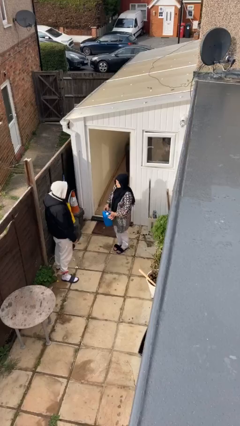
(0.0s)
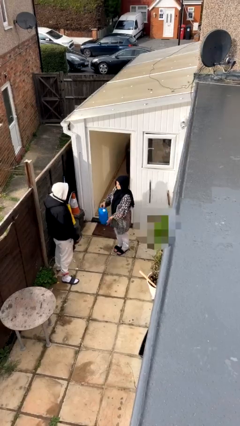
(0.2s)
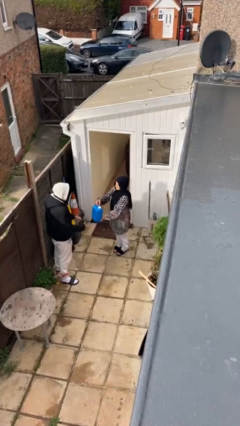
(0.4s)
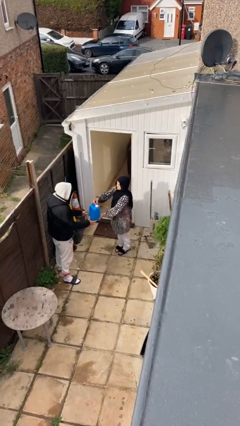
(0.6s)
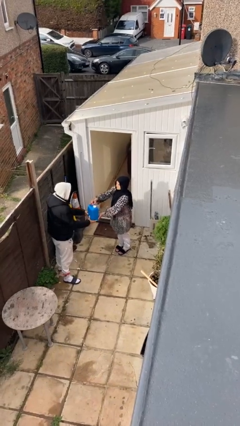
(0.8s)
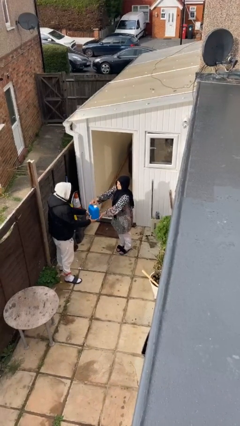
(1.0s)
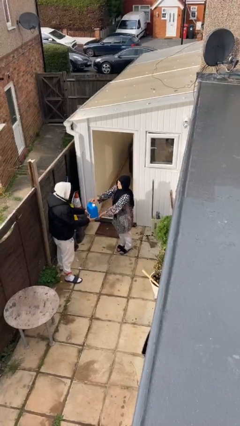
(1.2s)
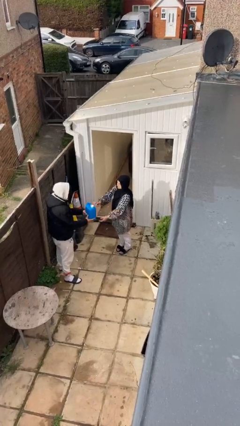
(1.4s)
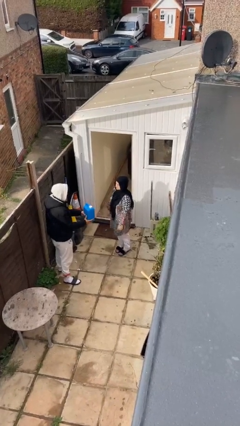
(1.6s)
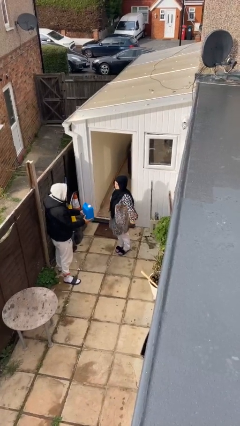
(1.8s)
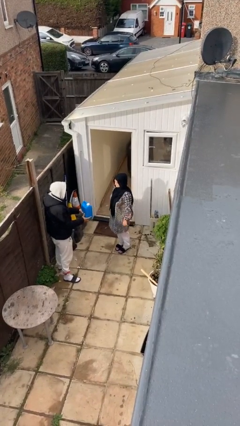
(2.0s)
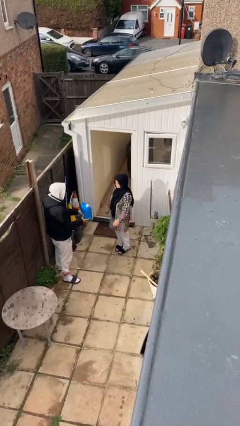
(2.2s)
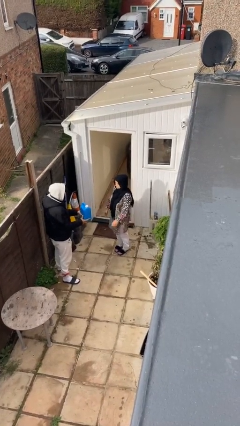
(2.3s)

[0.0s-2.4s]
person transfers object to person

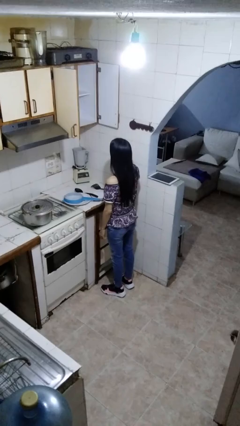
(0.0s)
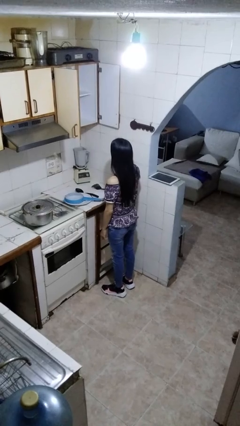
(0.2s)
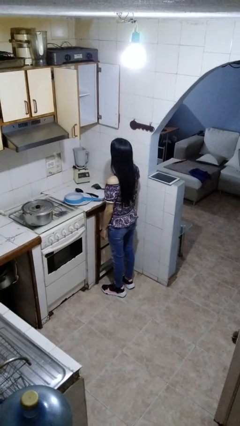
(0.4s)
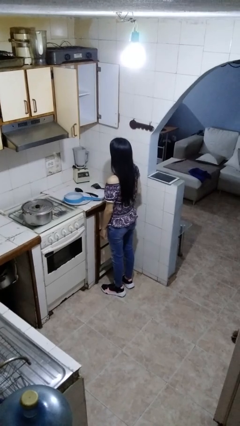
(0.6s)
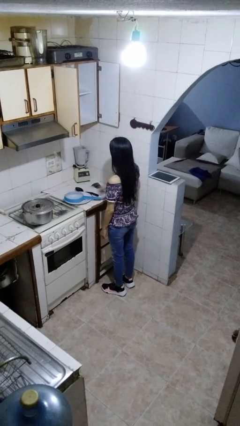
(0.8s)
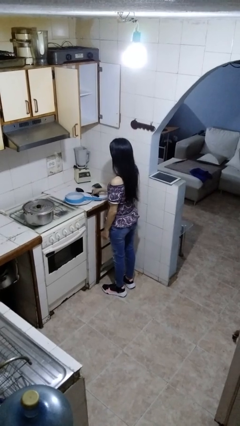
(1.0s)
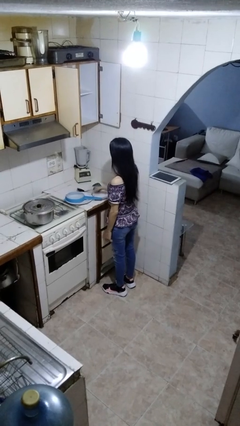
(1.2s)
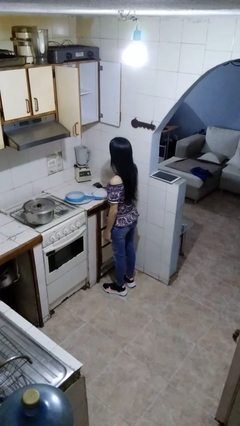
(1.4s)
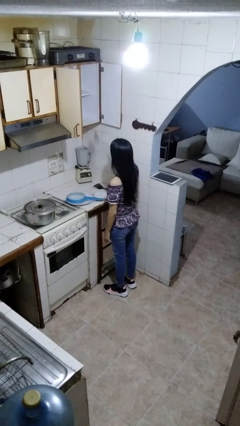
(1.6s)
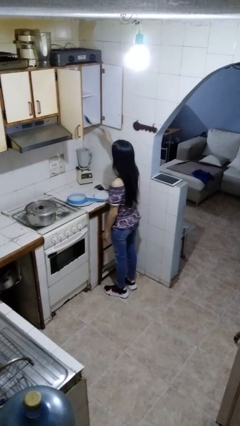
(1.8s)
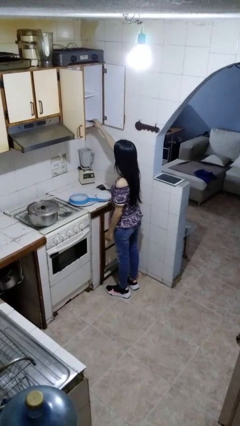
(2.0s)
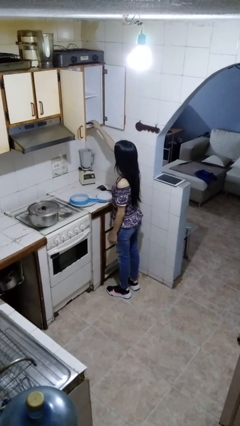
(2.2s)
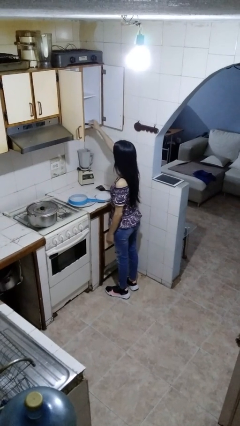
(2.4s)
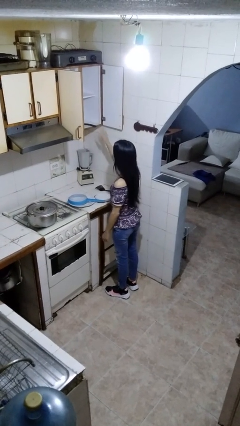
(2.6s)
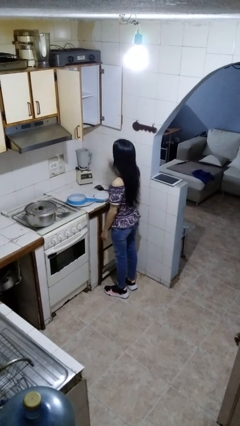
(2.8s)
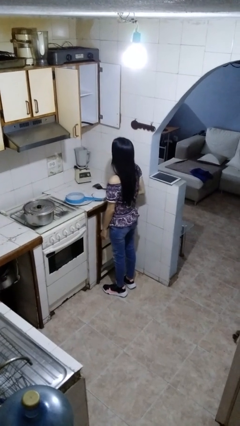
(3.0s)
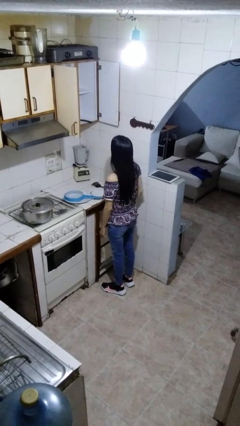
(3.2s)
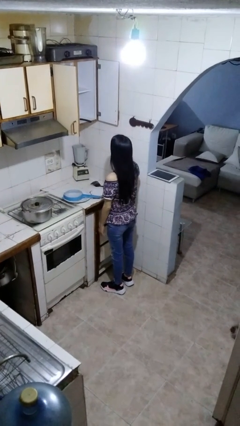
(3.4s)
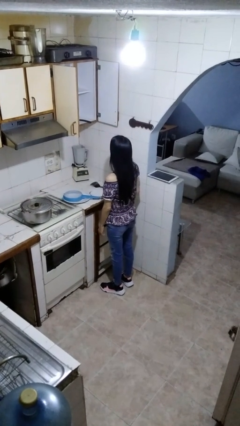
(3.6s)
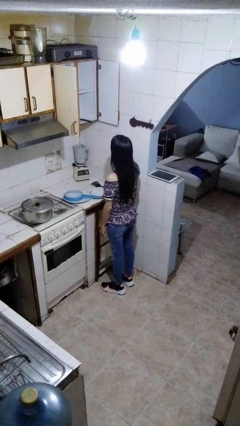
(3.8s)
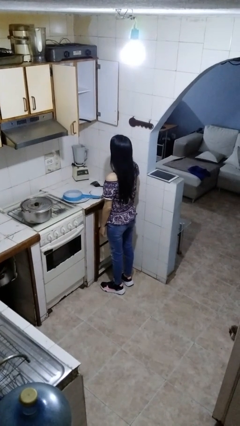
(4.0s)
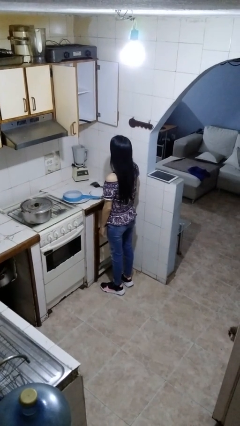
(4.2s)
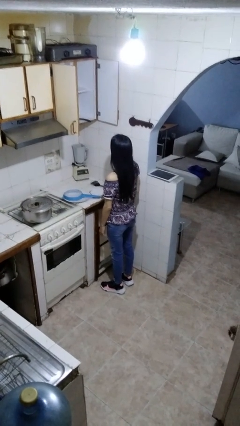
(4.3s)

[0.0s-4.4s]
person puts object in cabinet

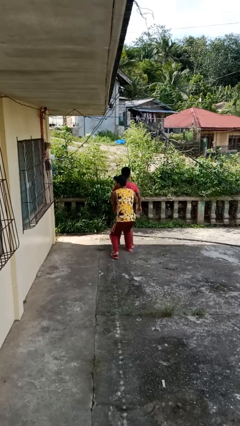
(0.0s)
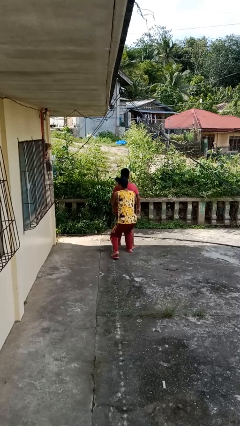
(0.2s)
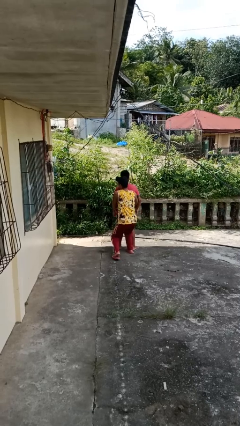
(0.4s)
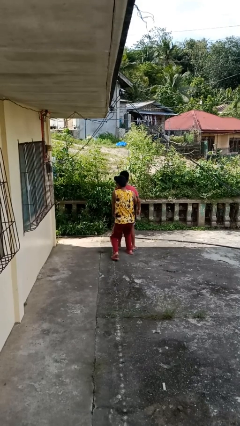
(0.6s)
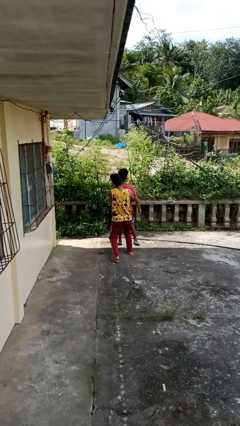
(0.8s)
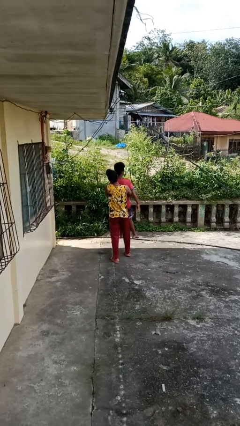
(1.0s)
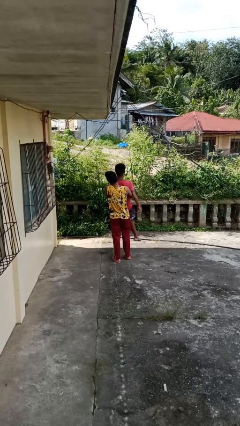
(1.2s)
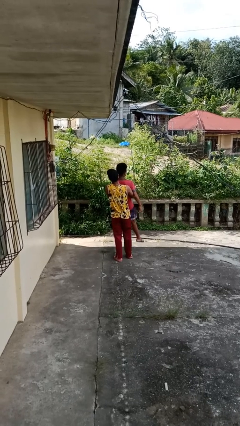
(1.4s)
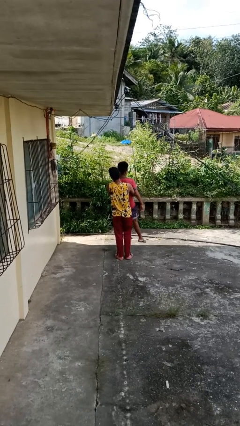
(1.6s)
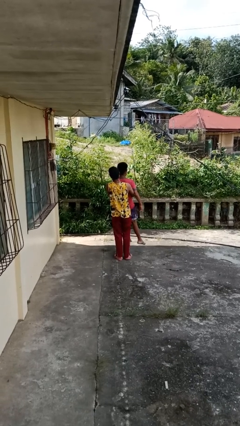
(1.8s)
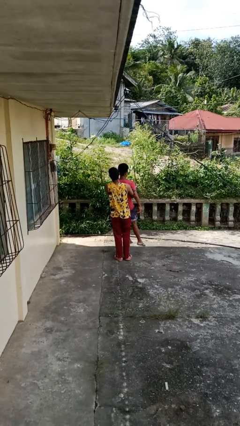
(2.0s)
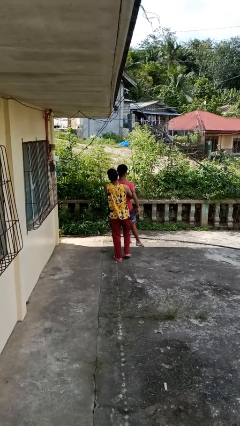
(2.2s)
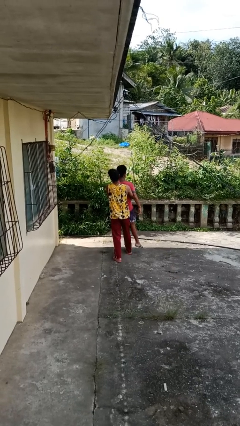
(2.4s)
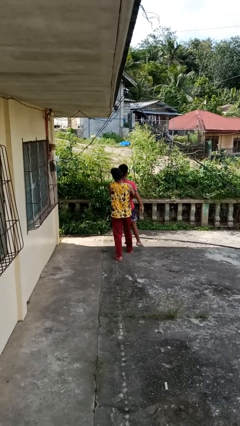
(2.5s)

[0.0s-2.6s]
person picks up person

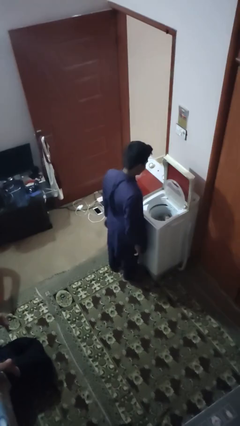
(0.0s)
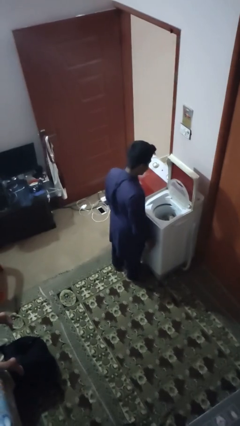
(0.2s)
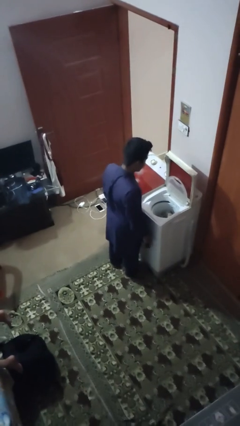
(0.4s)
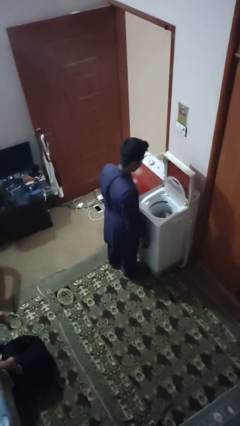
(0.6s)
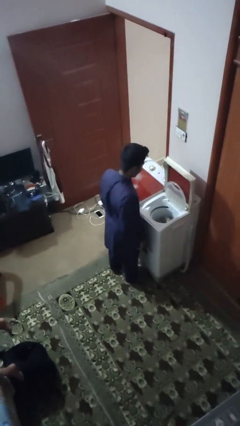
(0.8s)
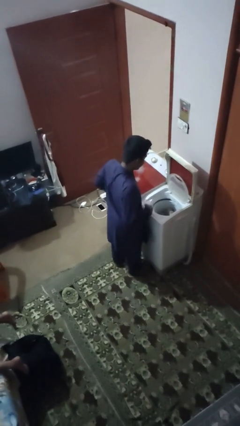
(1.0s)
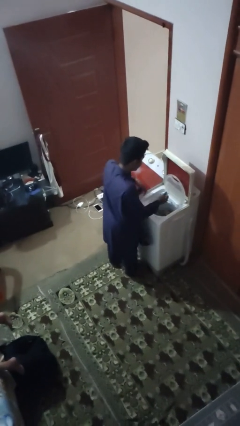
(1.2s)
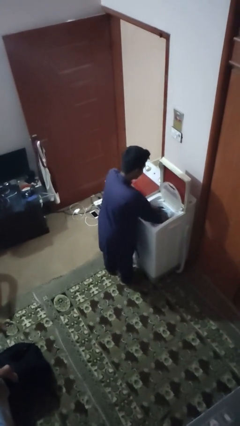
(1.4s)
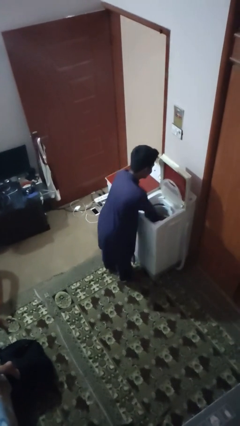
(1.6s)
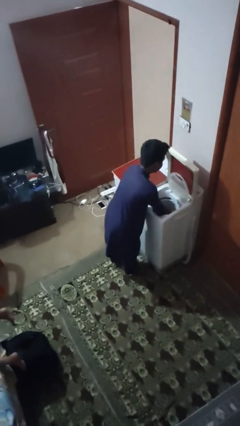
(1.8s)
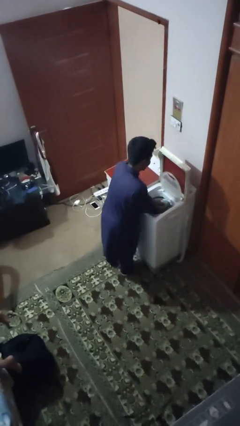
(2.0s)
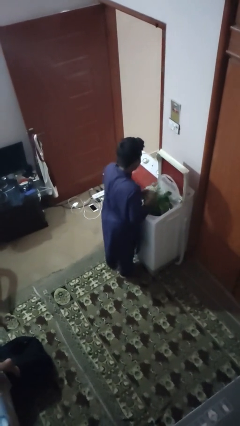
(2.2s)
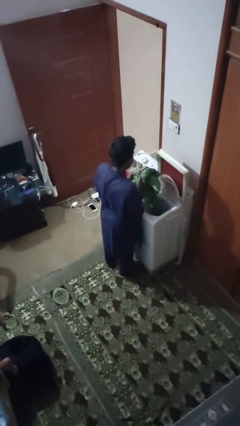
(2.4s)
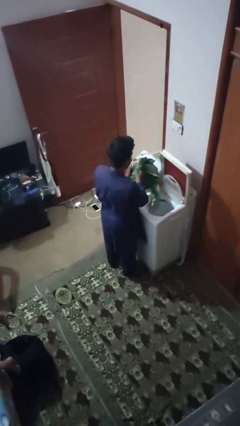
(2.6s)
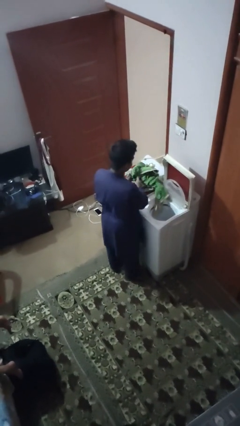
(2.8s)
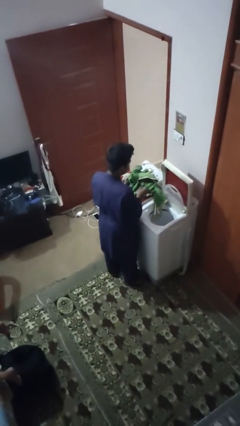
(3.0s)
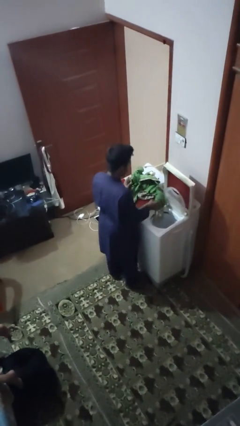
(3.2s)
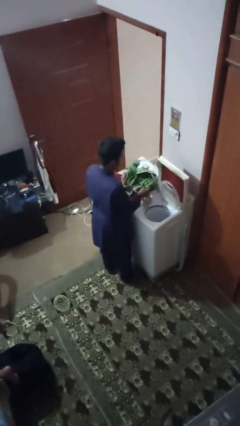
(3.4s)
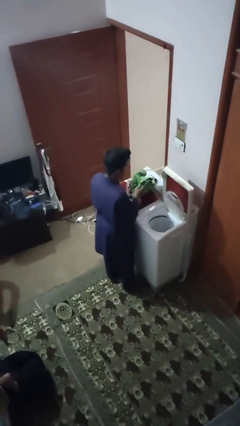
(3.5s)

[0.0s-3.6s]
person unloads dryer

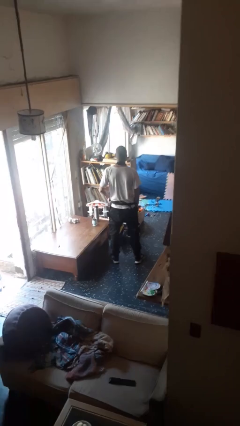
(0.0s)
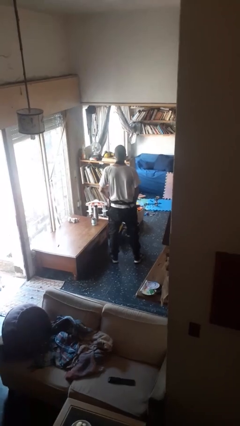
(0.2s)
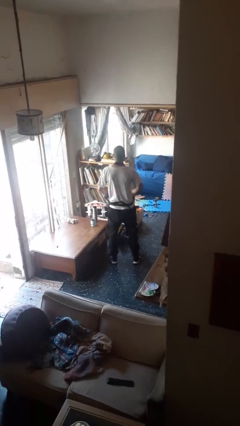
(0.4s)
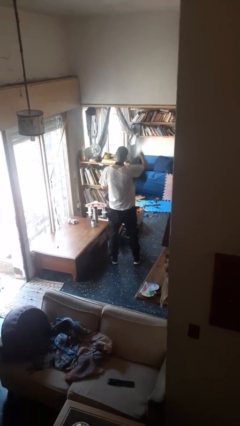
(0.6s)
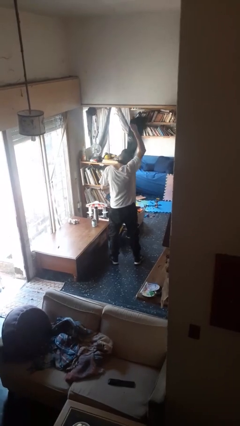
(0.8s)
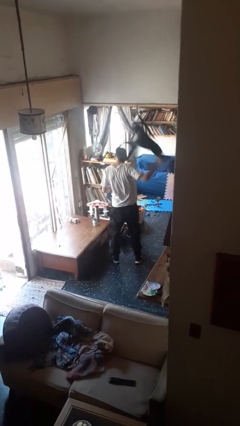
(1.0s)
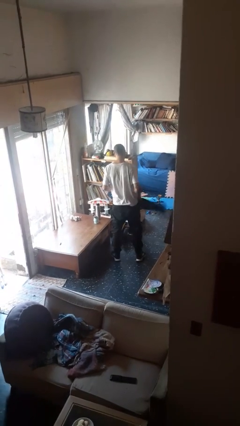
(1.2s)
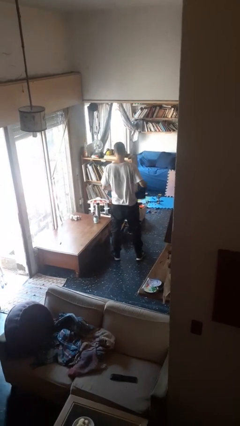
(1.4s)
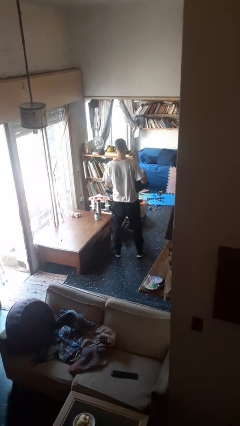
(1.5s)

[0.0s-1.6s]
person takes off apron

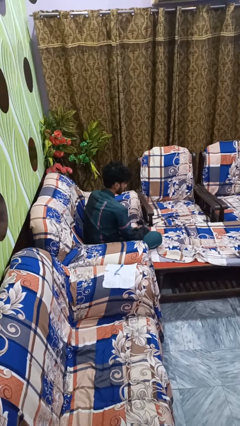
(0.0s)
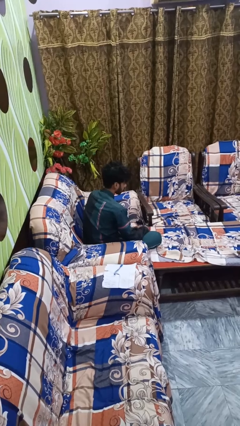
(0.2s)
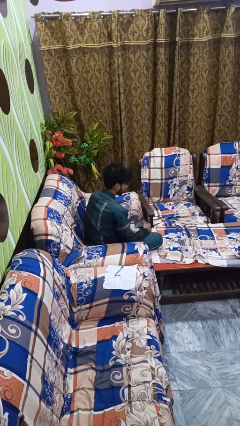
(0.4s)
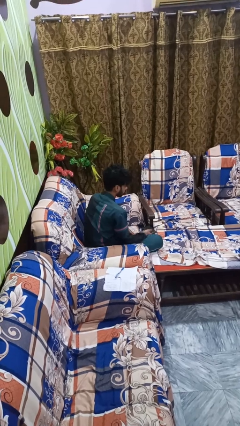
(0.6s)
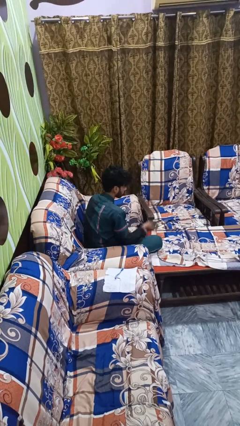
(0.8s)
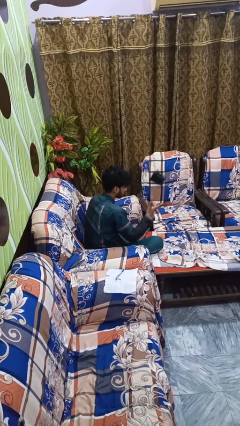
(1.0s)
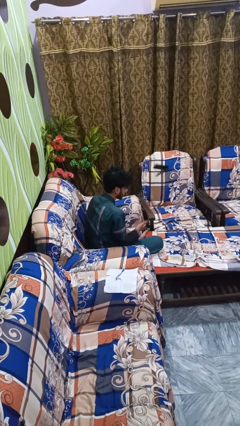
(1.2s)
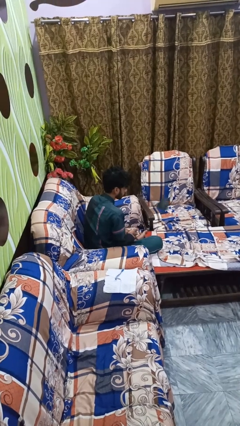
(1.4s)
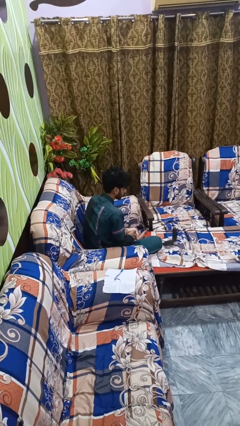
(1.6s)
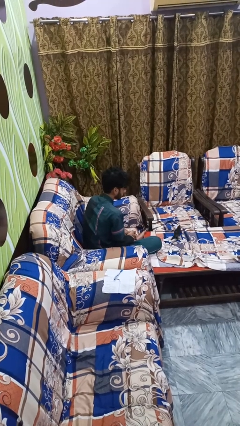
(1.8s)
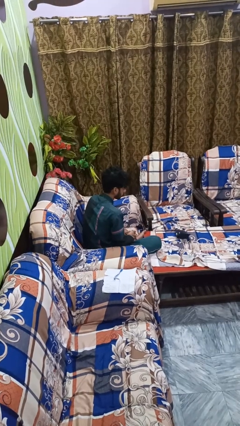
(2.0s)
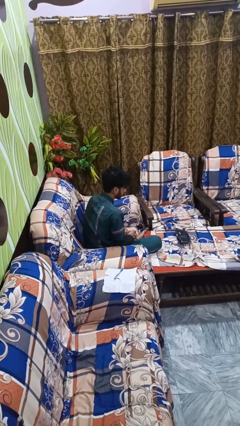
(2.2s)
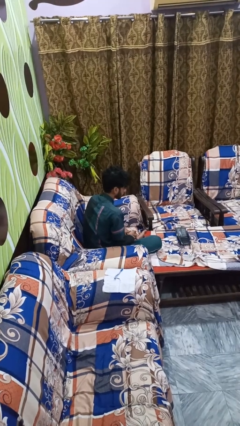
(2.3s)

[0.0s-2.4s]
person throws object into air

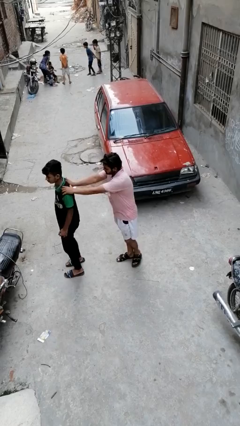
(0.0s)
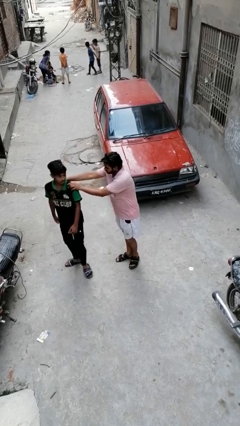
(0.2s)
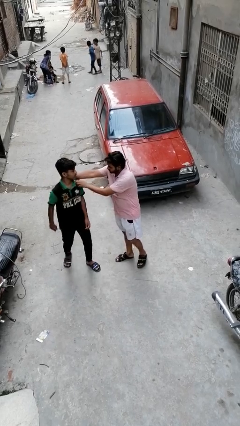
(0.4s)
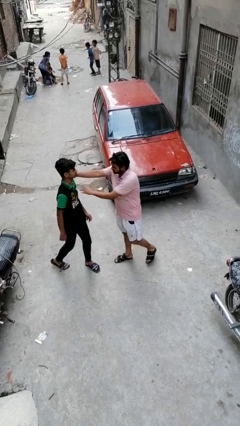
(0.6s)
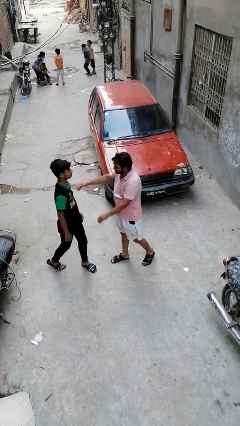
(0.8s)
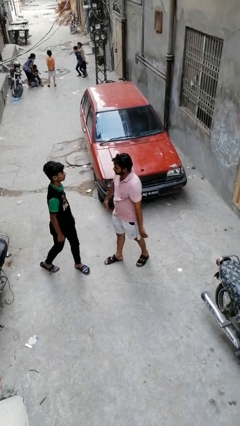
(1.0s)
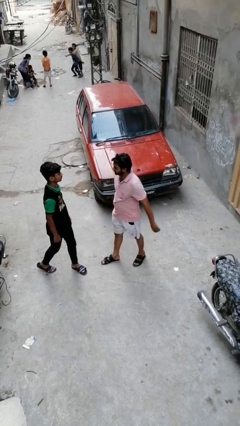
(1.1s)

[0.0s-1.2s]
person spins person around
